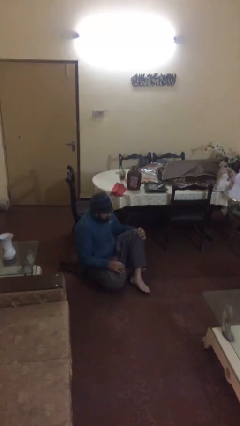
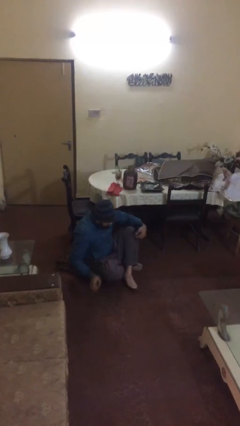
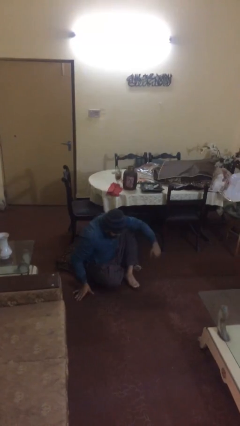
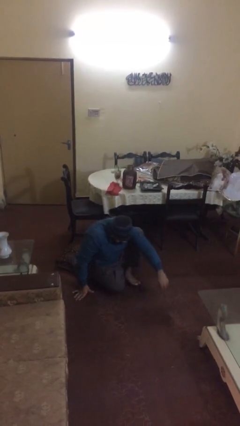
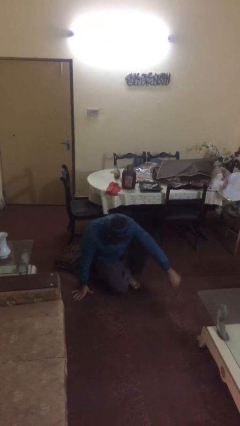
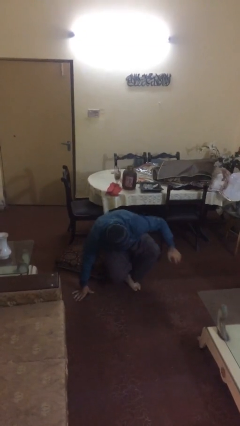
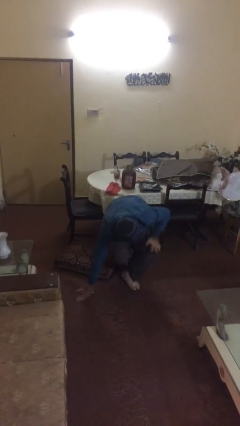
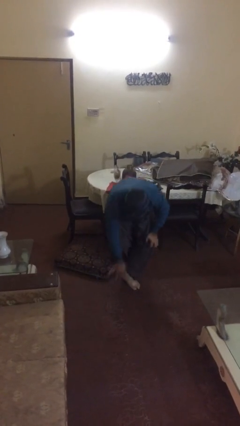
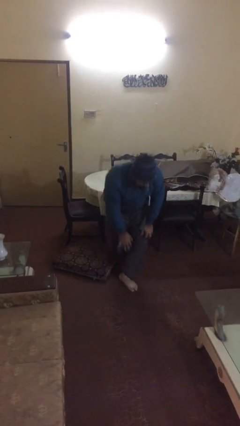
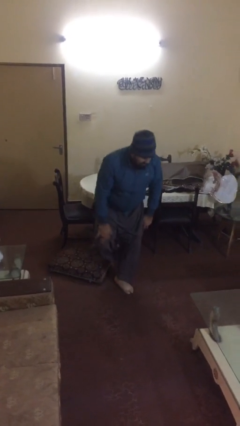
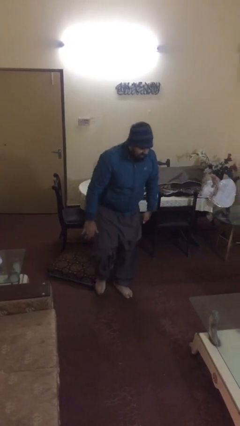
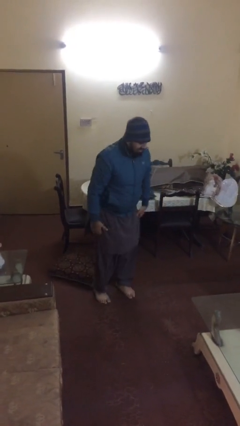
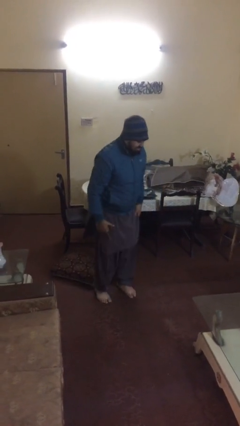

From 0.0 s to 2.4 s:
person stands up

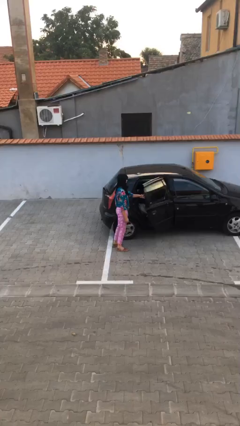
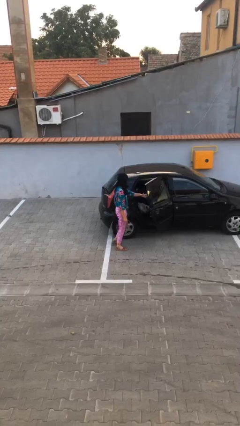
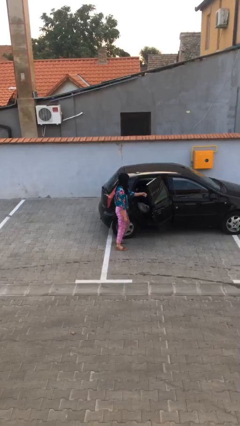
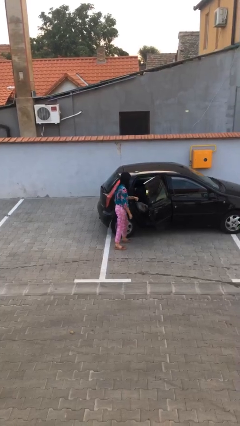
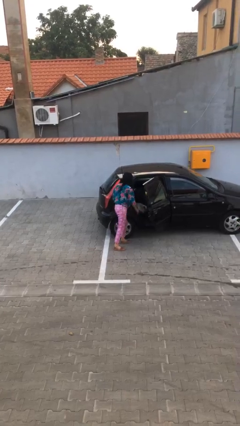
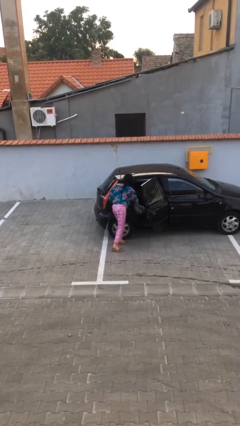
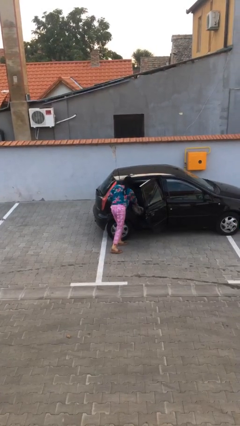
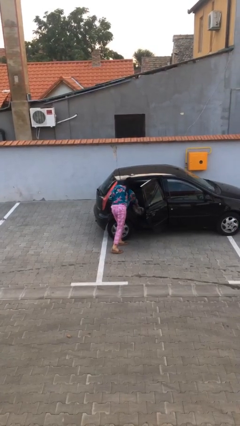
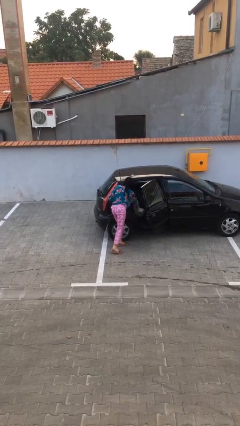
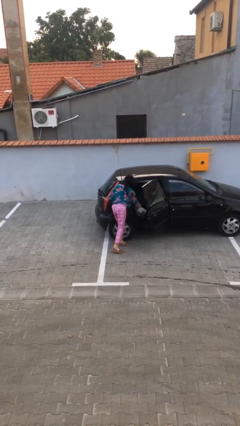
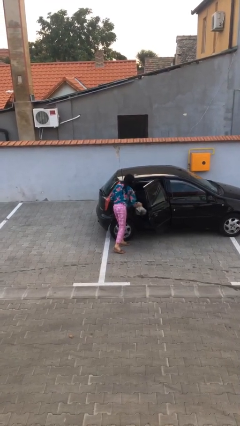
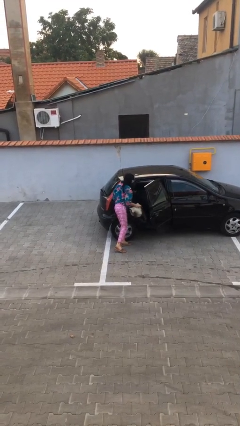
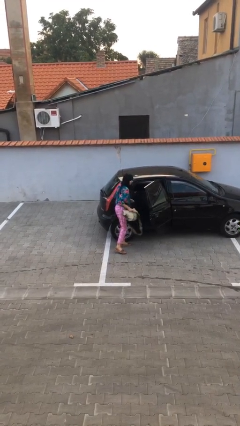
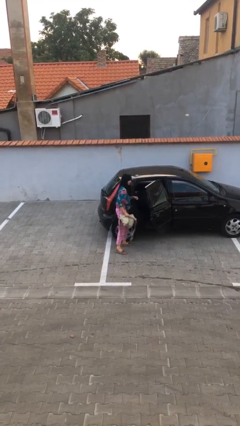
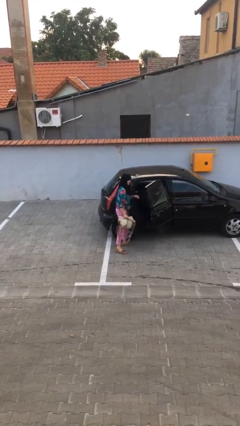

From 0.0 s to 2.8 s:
person unloads car

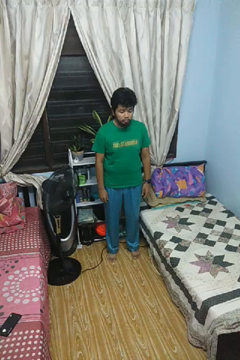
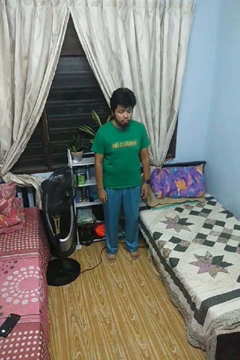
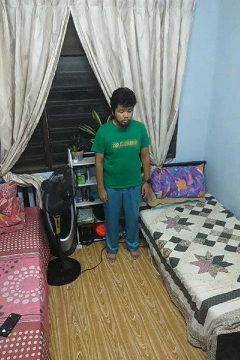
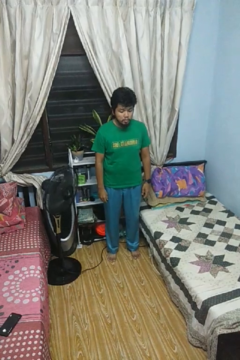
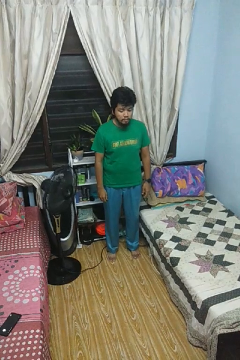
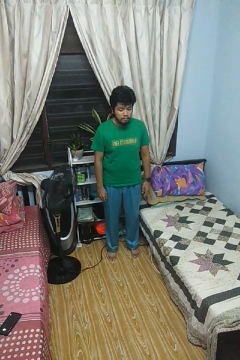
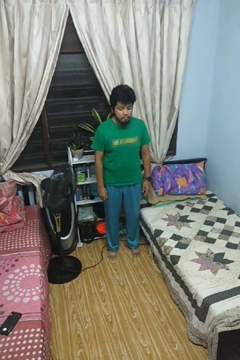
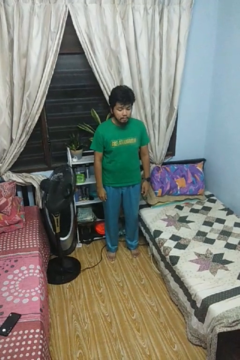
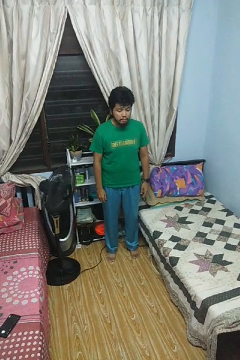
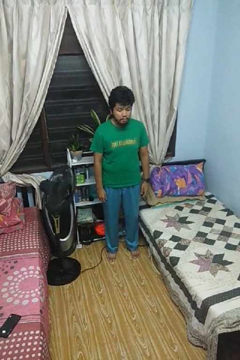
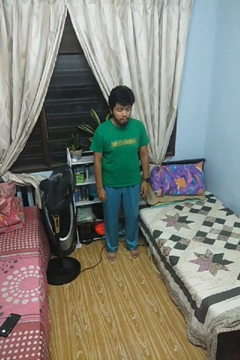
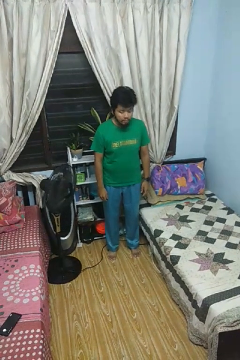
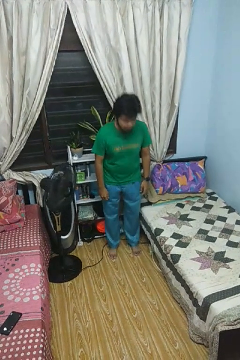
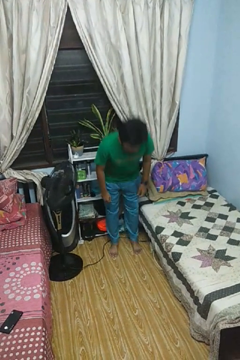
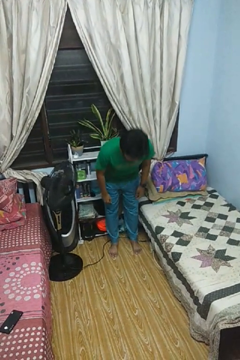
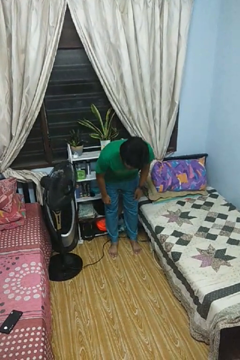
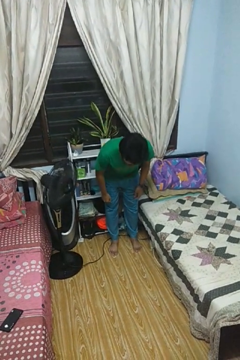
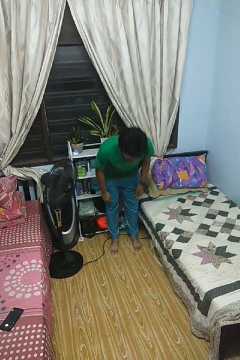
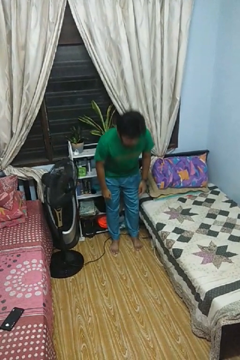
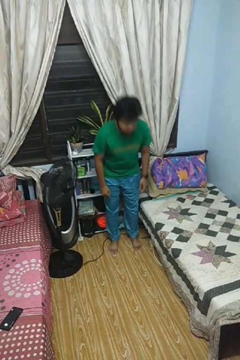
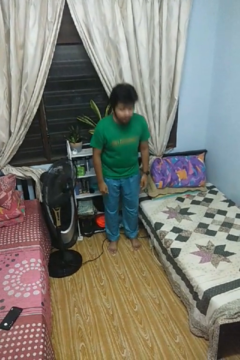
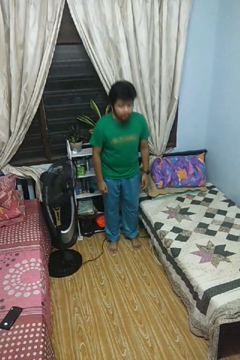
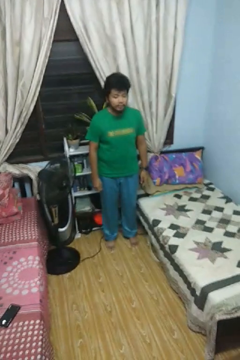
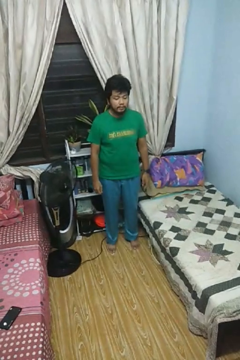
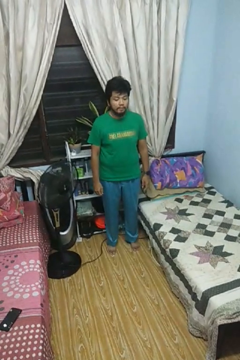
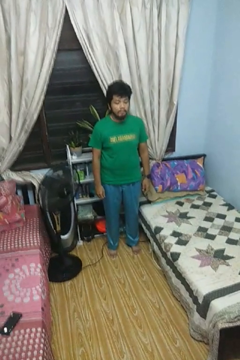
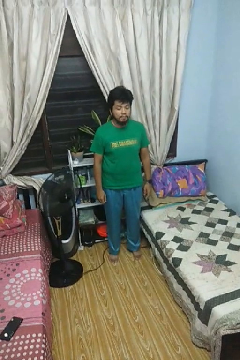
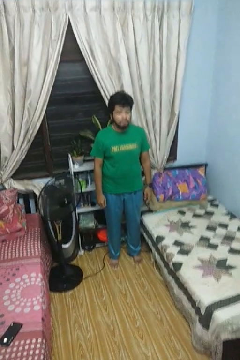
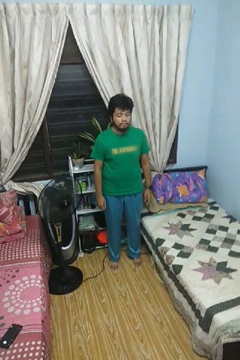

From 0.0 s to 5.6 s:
person bows

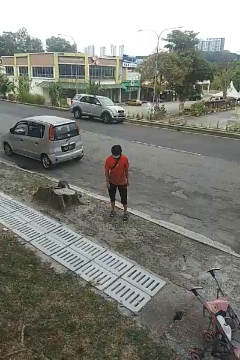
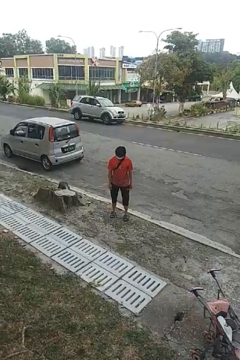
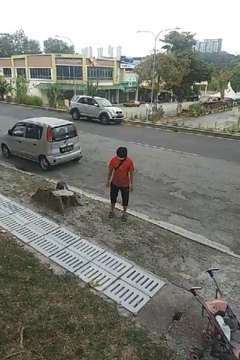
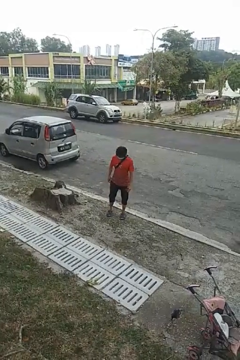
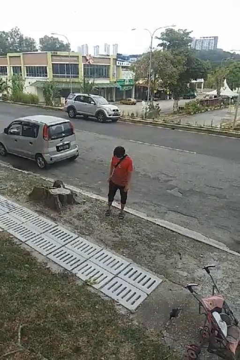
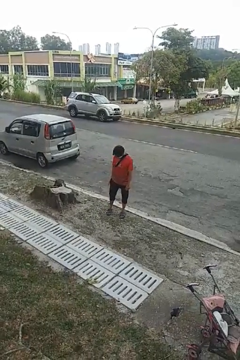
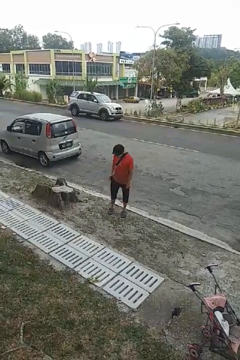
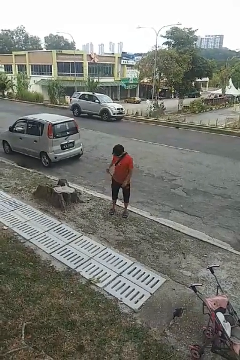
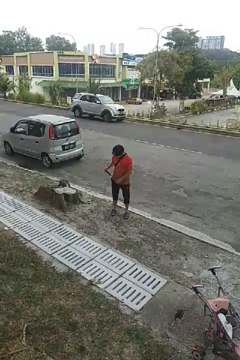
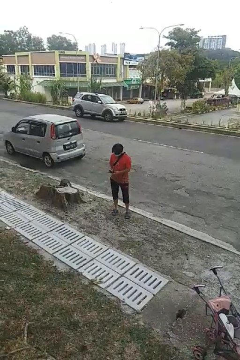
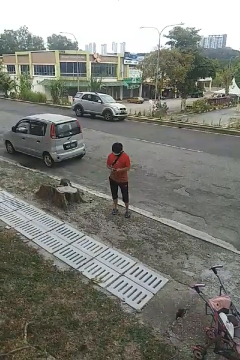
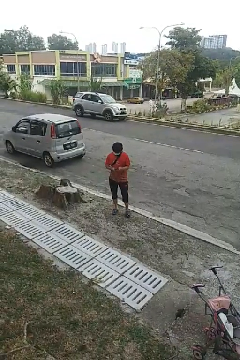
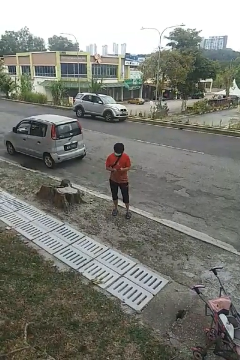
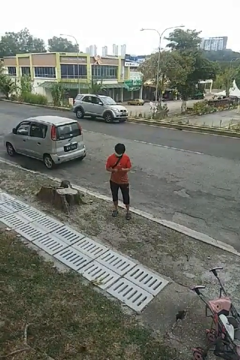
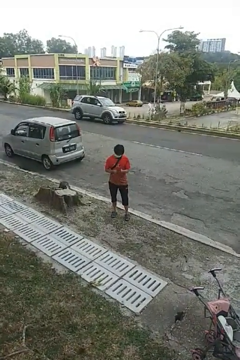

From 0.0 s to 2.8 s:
person takes phone from pocket

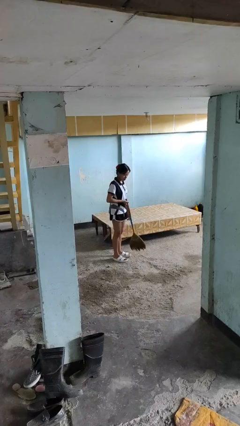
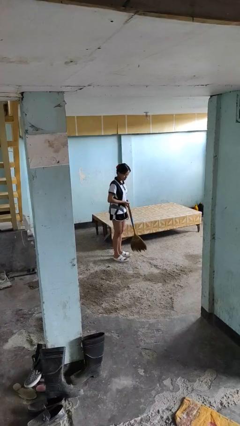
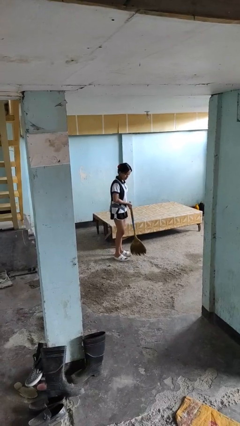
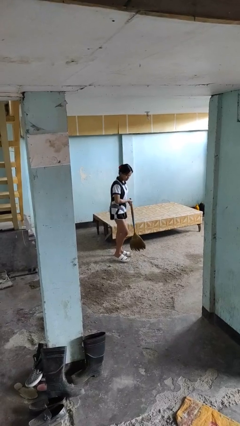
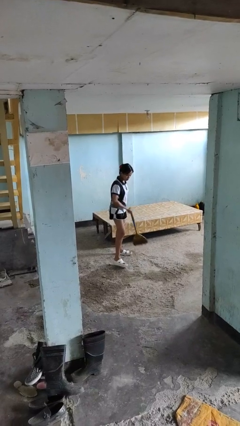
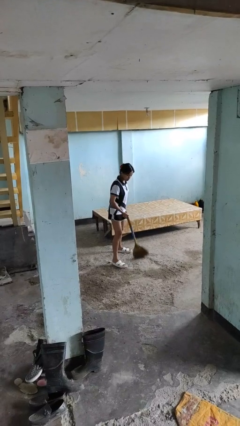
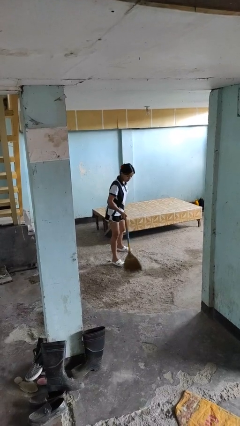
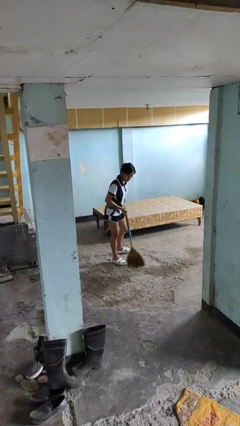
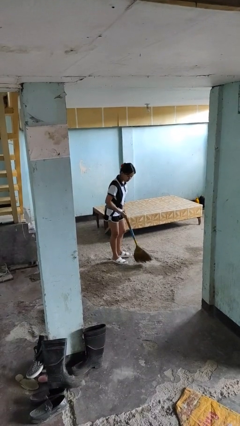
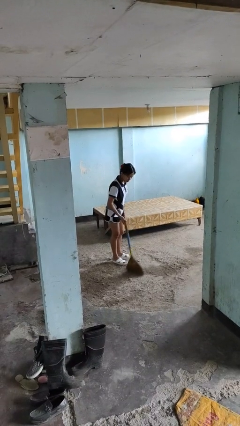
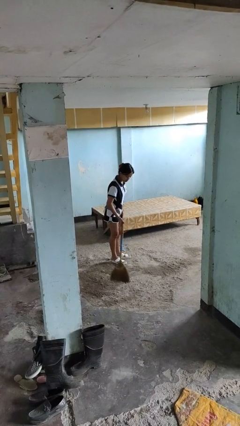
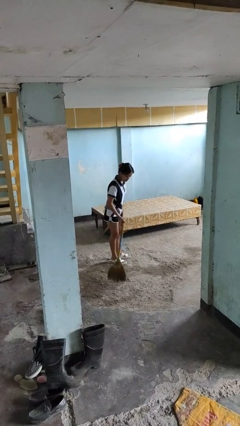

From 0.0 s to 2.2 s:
person sweeps floor

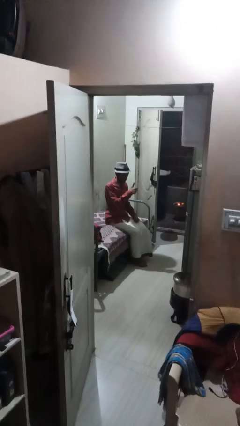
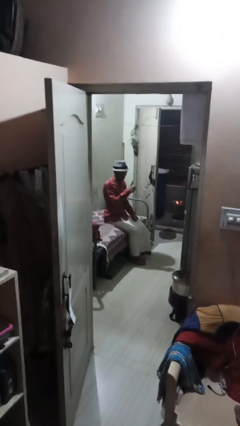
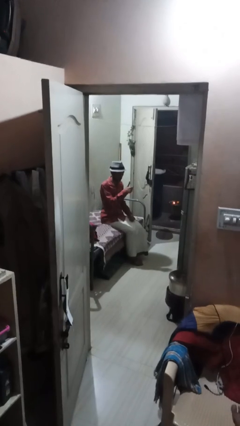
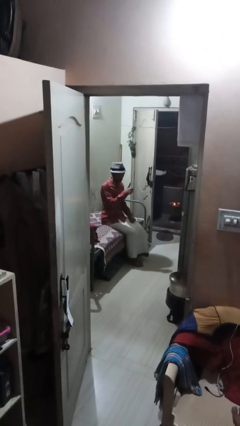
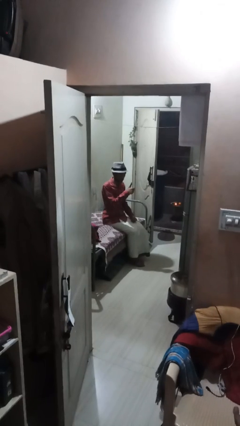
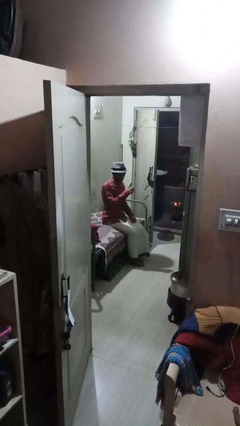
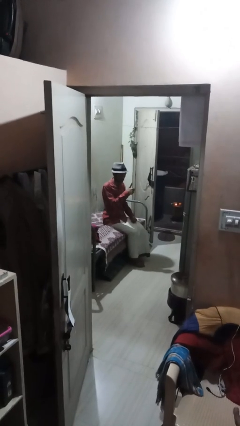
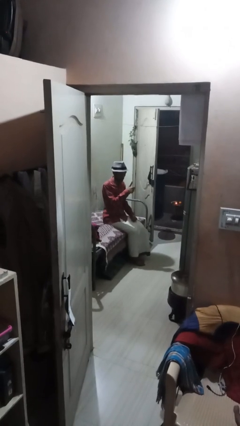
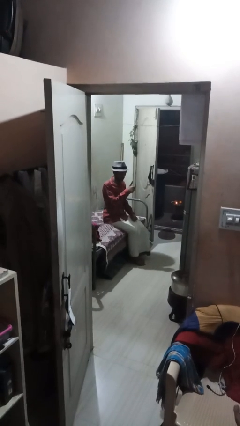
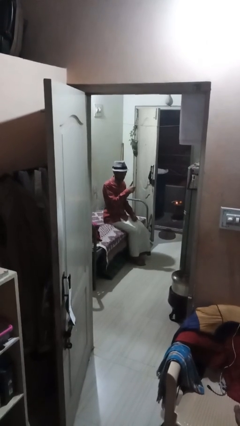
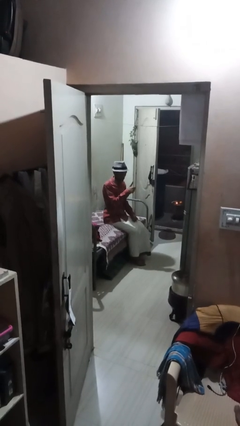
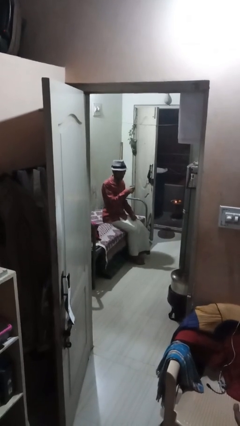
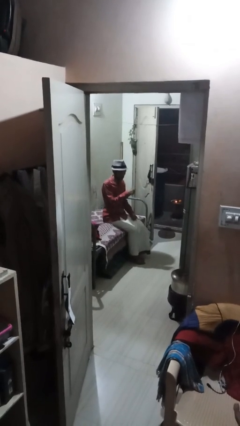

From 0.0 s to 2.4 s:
person gestures thumbs up

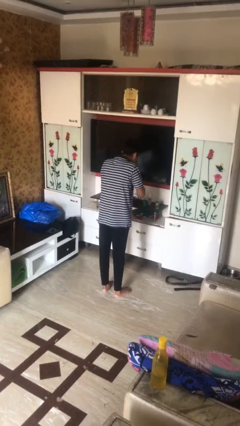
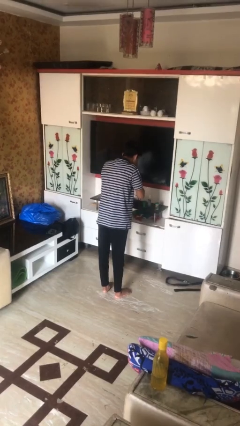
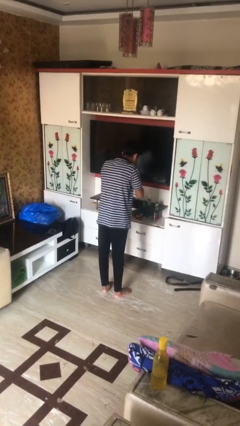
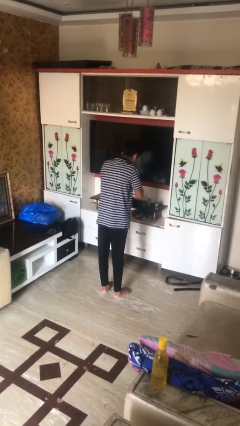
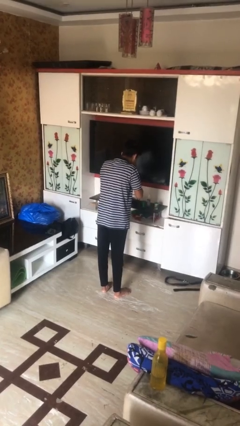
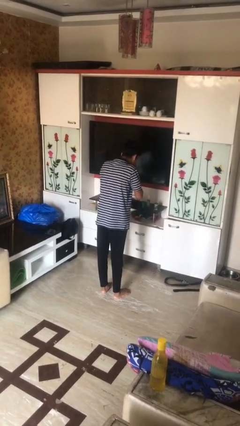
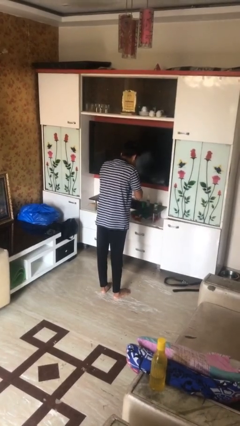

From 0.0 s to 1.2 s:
person sneezes into hand
